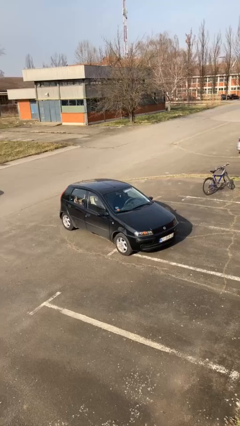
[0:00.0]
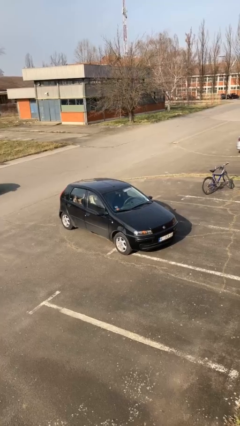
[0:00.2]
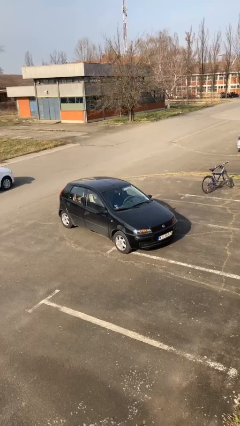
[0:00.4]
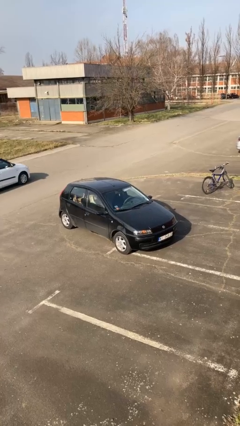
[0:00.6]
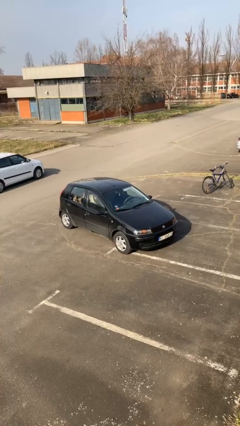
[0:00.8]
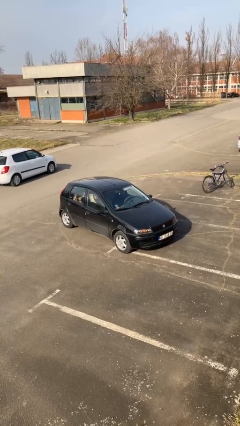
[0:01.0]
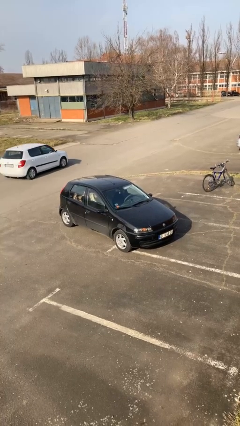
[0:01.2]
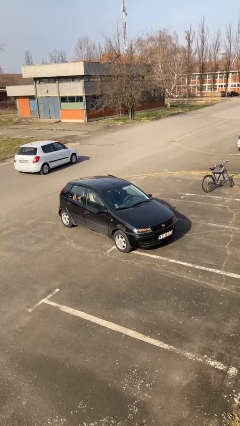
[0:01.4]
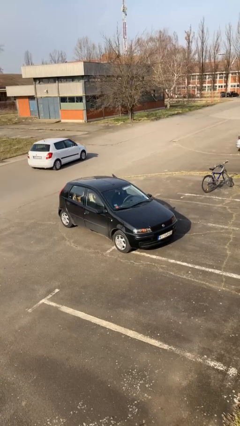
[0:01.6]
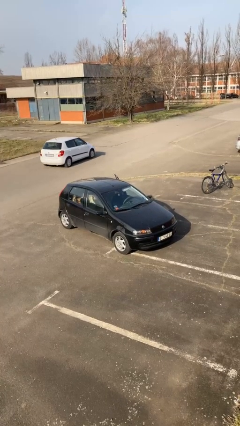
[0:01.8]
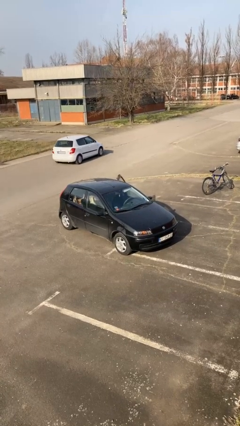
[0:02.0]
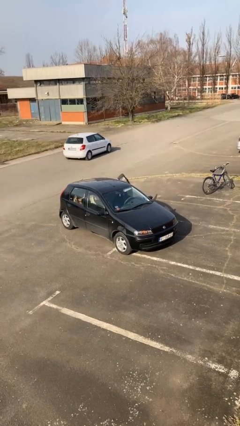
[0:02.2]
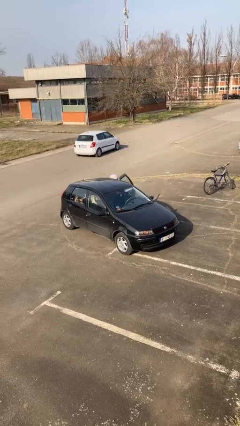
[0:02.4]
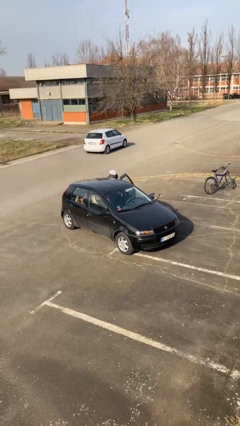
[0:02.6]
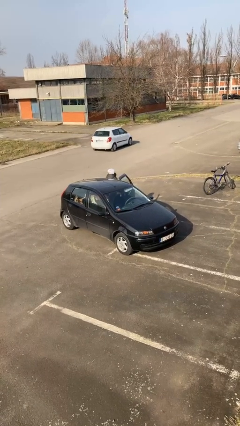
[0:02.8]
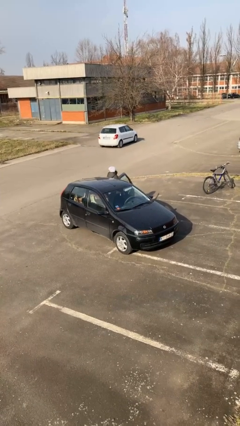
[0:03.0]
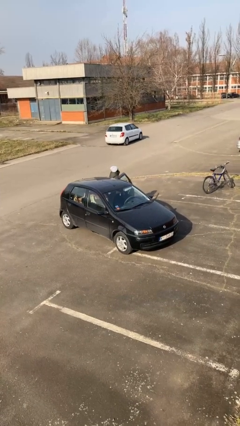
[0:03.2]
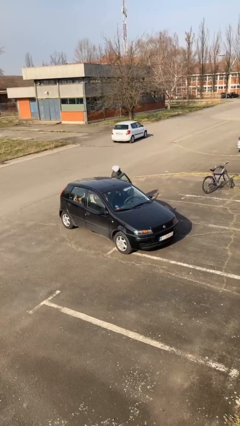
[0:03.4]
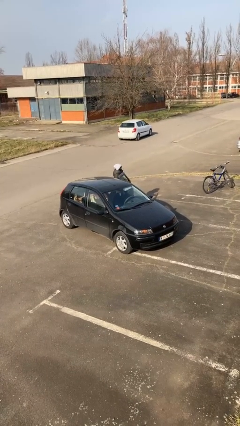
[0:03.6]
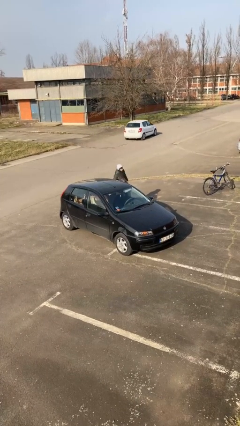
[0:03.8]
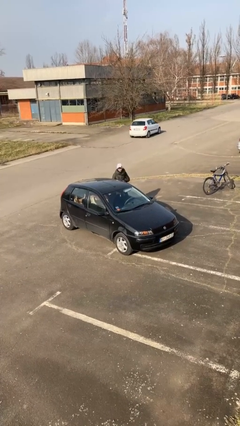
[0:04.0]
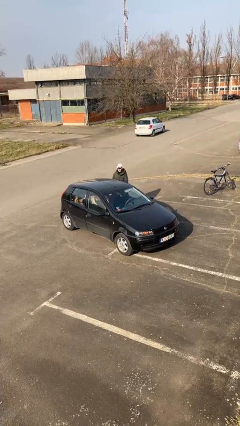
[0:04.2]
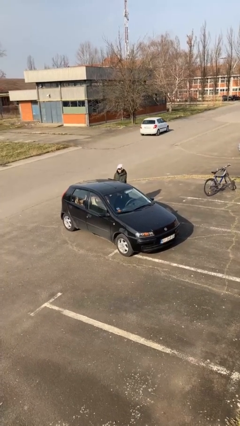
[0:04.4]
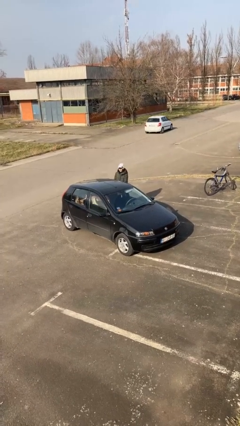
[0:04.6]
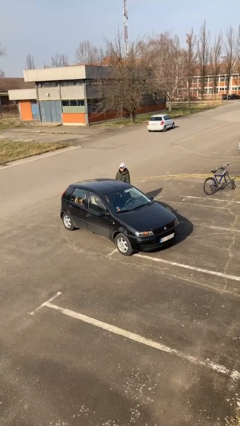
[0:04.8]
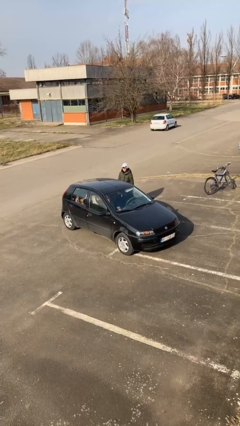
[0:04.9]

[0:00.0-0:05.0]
car drops off person

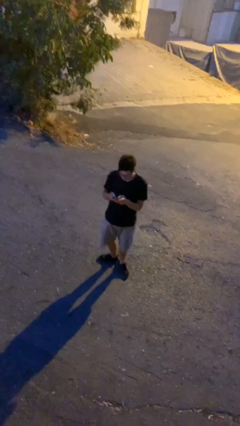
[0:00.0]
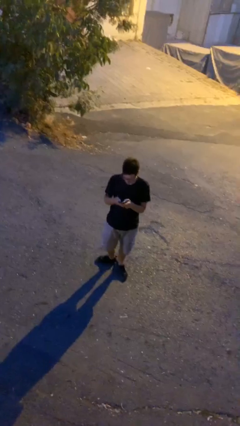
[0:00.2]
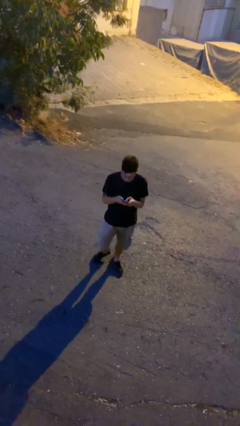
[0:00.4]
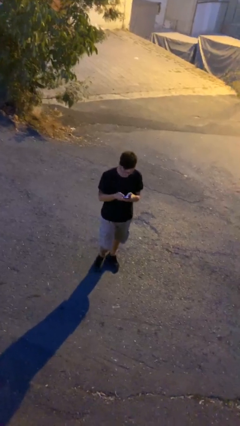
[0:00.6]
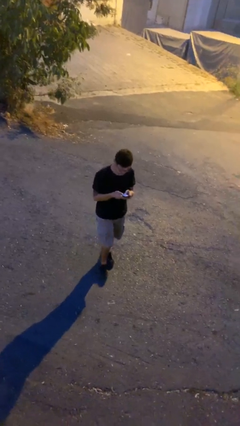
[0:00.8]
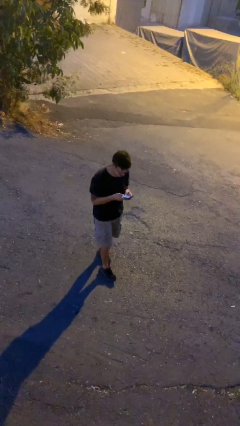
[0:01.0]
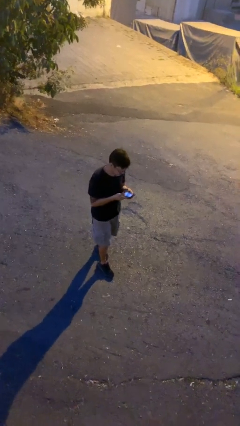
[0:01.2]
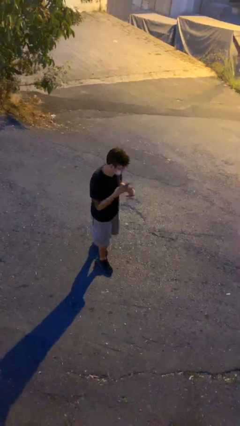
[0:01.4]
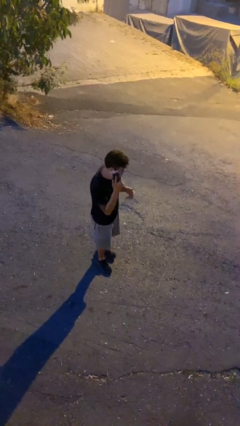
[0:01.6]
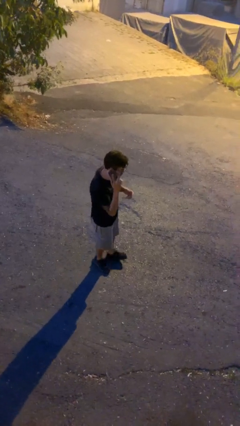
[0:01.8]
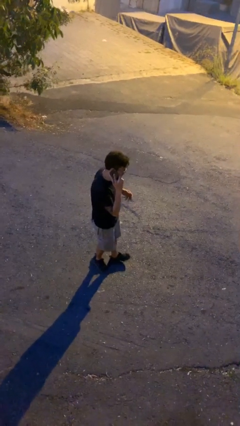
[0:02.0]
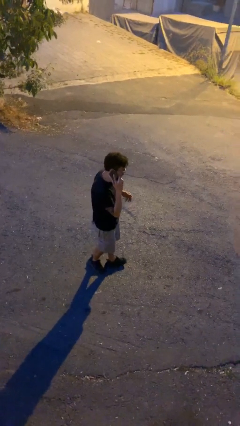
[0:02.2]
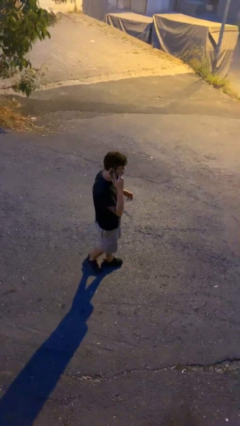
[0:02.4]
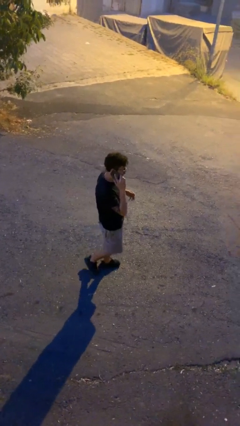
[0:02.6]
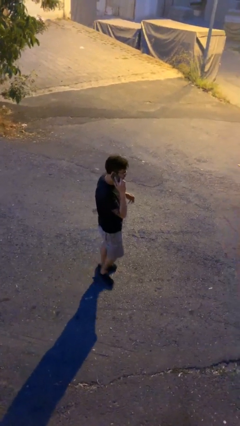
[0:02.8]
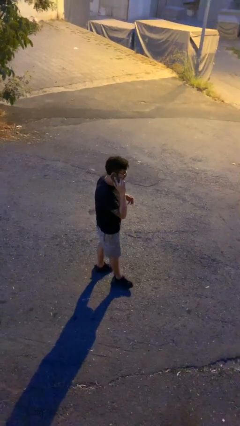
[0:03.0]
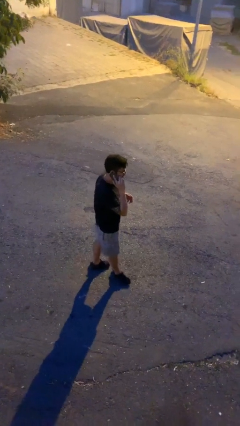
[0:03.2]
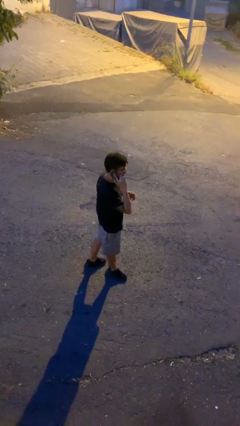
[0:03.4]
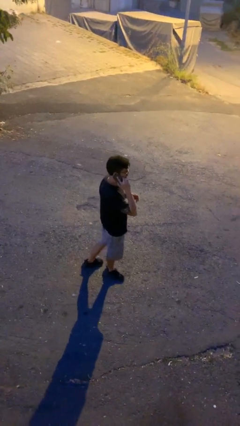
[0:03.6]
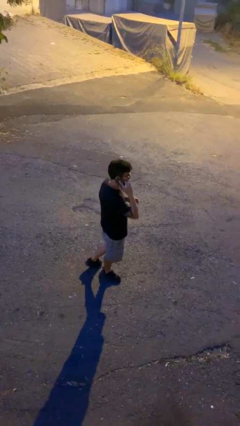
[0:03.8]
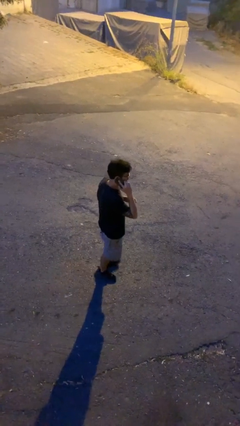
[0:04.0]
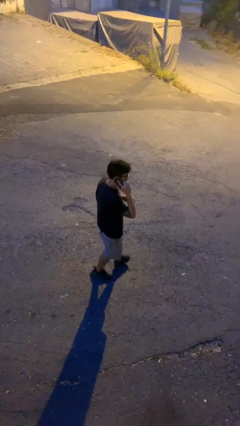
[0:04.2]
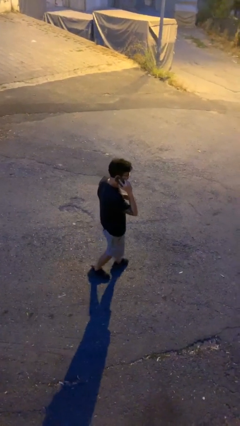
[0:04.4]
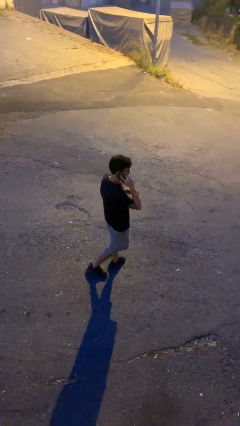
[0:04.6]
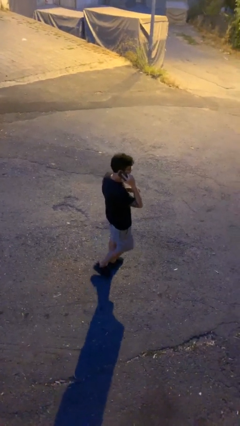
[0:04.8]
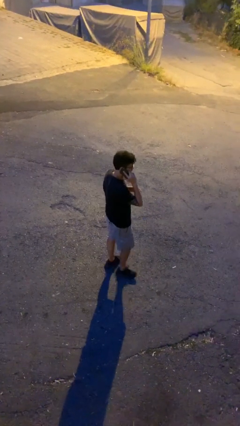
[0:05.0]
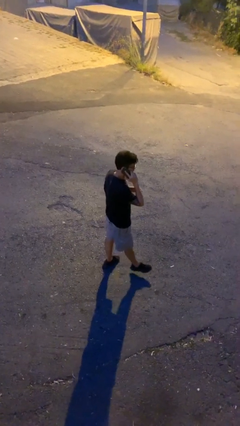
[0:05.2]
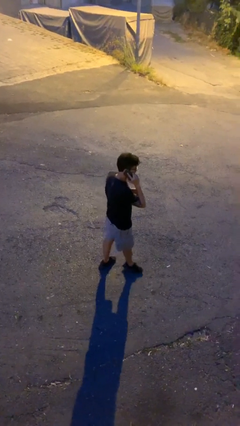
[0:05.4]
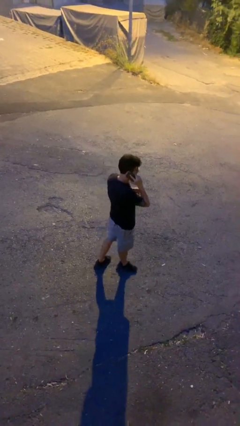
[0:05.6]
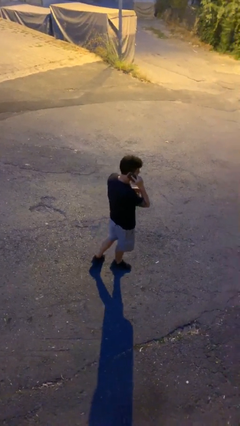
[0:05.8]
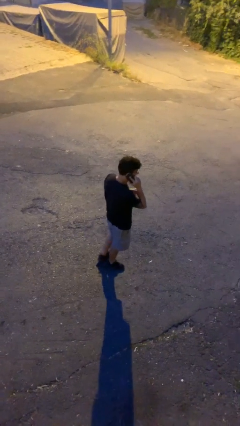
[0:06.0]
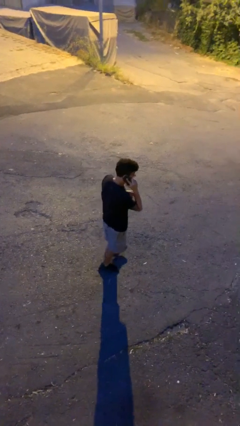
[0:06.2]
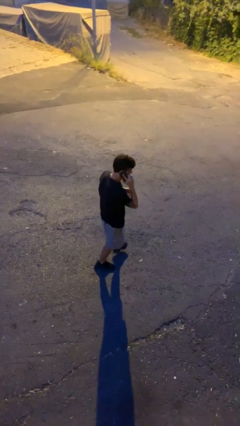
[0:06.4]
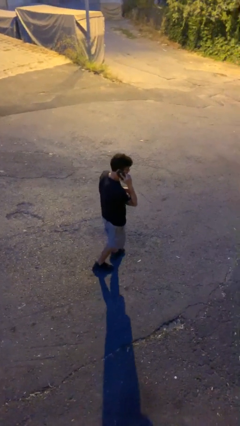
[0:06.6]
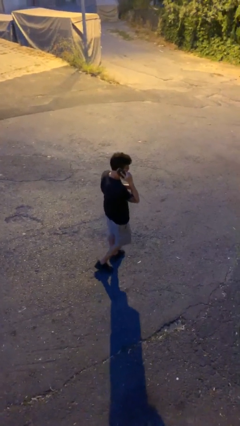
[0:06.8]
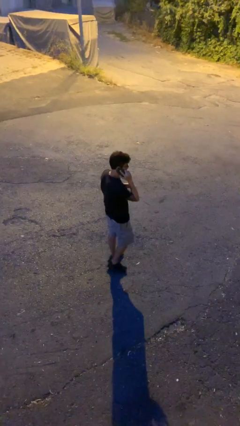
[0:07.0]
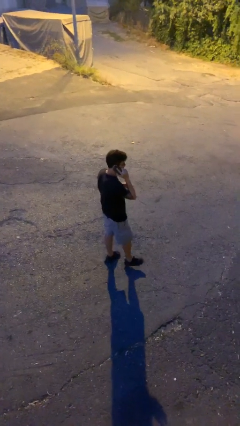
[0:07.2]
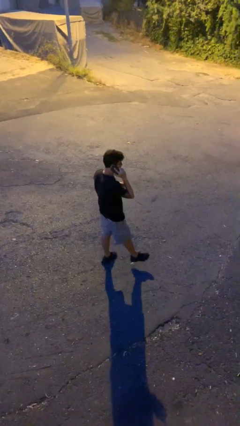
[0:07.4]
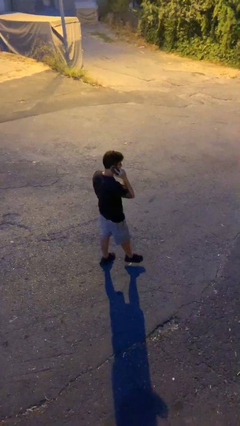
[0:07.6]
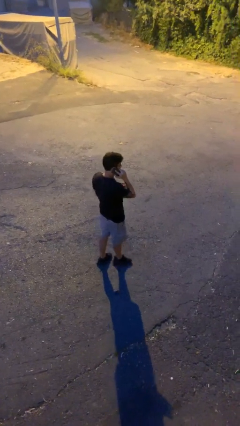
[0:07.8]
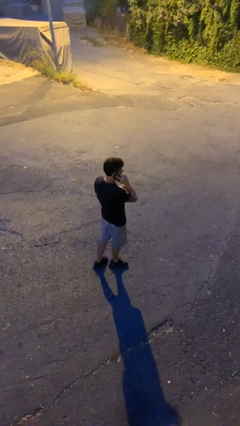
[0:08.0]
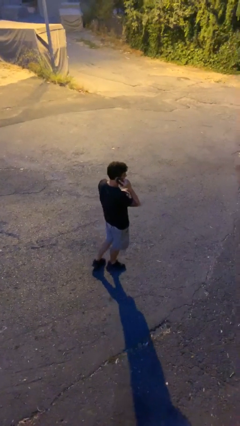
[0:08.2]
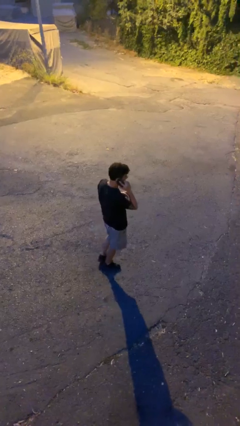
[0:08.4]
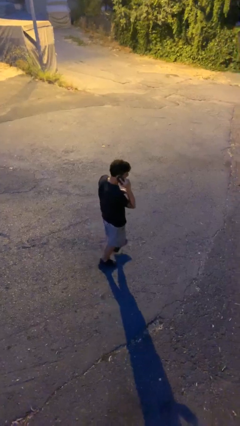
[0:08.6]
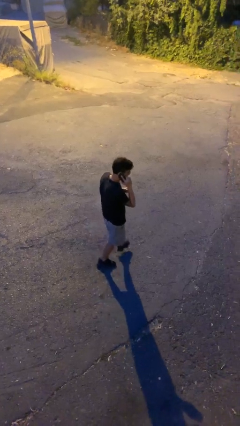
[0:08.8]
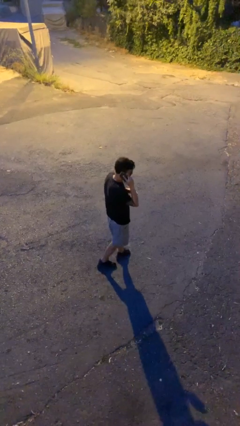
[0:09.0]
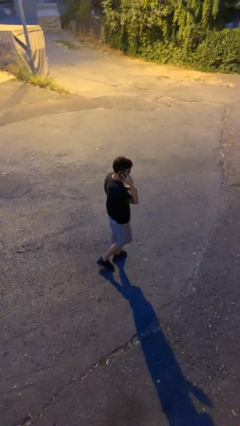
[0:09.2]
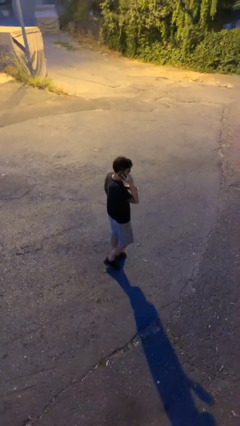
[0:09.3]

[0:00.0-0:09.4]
person talks on phone

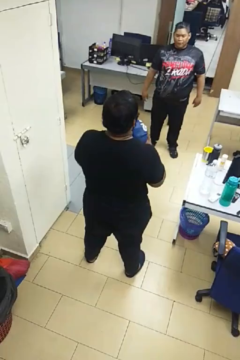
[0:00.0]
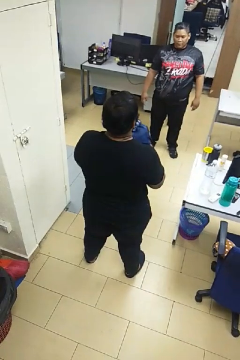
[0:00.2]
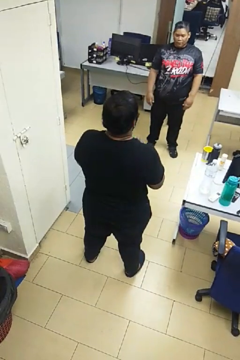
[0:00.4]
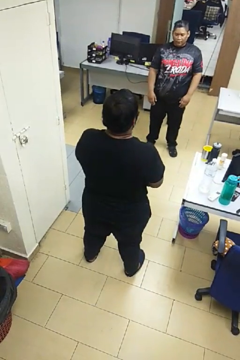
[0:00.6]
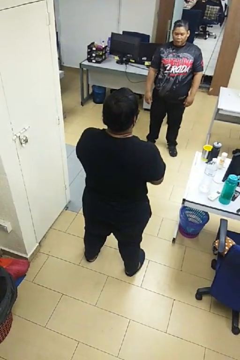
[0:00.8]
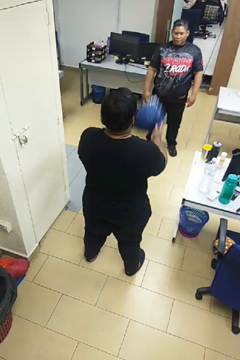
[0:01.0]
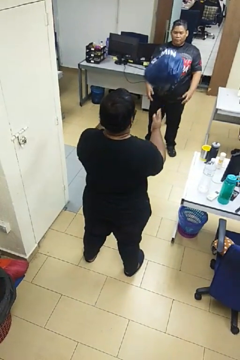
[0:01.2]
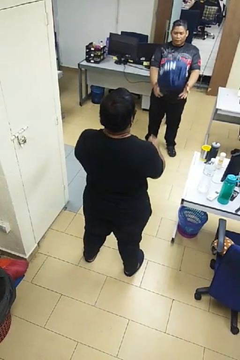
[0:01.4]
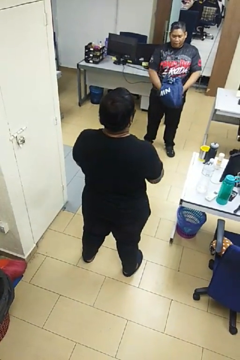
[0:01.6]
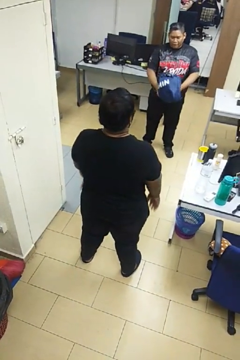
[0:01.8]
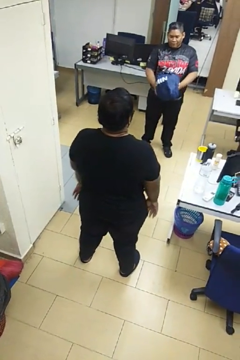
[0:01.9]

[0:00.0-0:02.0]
person throws object to person

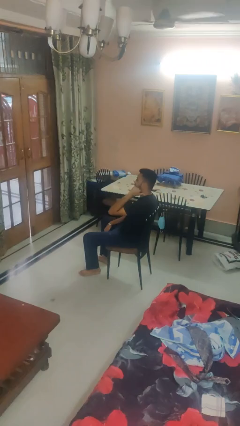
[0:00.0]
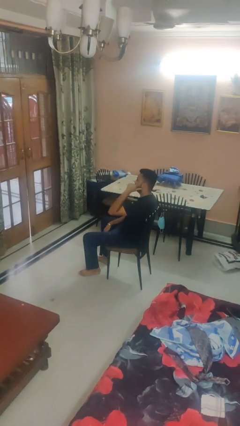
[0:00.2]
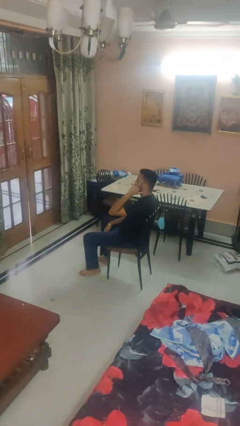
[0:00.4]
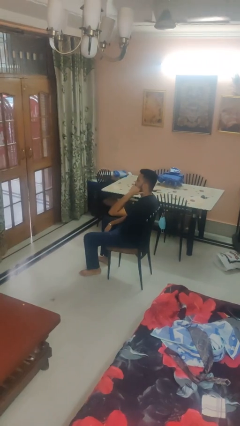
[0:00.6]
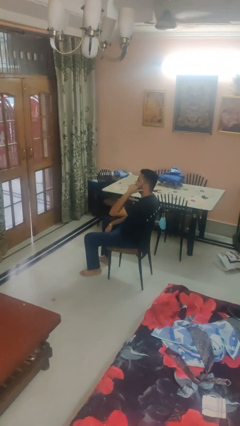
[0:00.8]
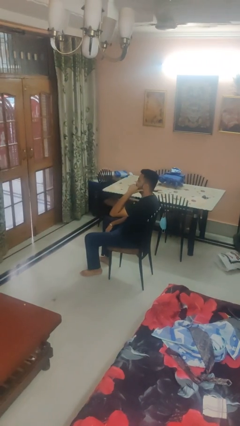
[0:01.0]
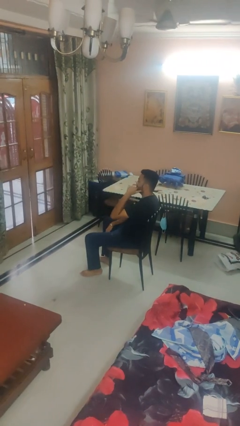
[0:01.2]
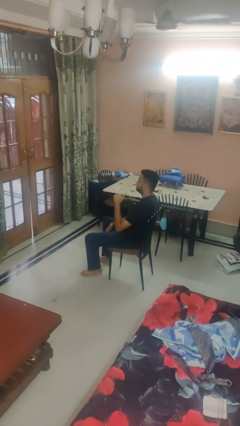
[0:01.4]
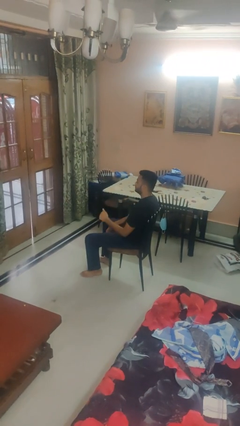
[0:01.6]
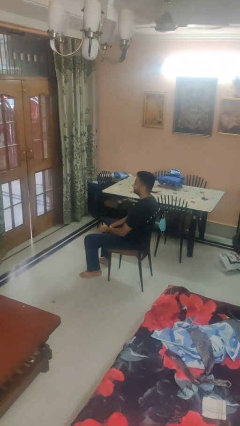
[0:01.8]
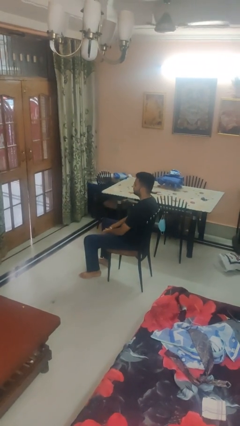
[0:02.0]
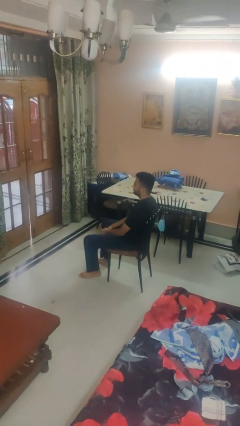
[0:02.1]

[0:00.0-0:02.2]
person gestures behind me
